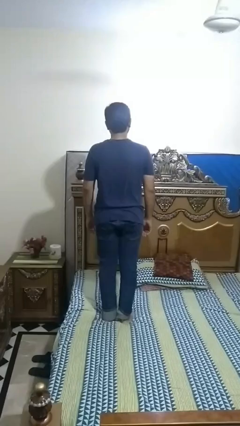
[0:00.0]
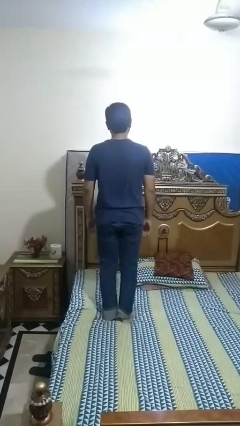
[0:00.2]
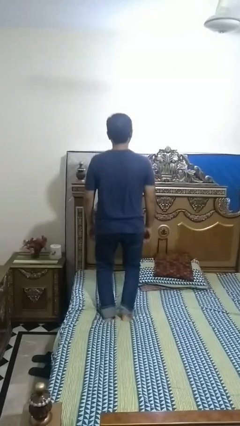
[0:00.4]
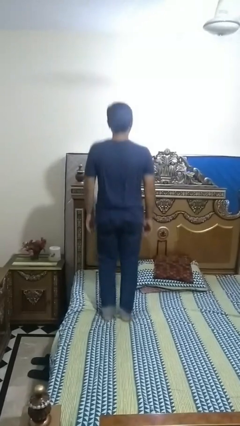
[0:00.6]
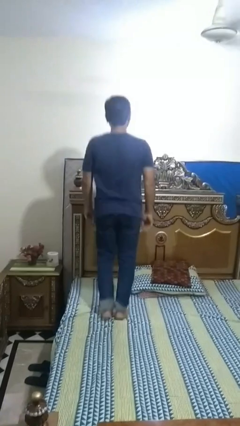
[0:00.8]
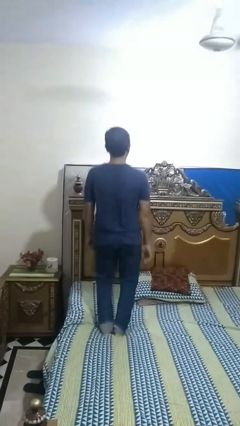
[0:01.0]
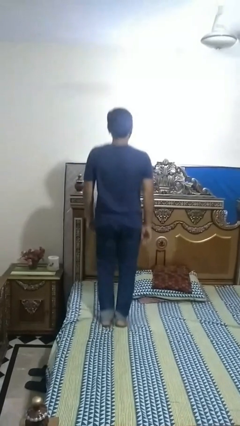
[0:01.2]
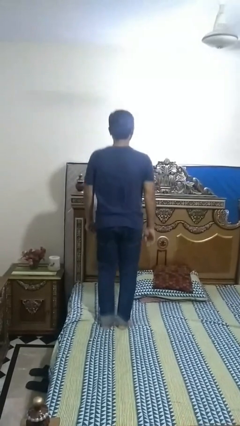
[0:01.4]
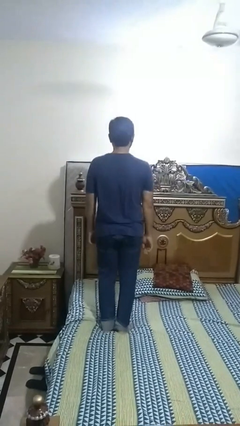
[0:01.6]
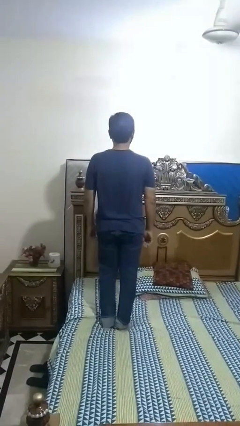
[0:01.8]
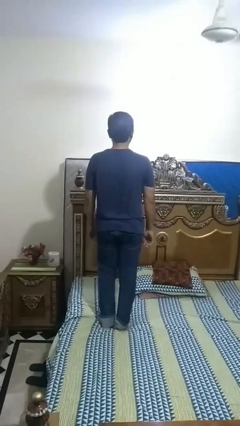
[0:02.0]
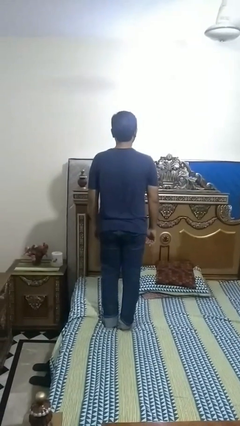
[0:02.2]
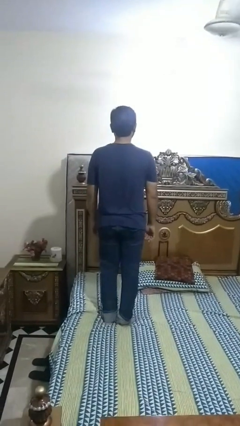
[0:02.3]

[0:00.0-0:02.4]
person jumps on bed

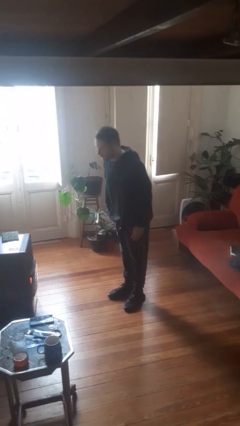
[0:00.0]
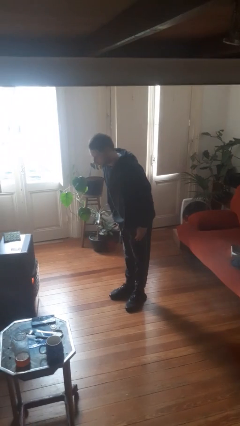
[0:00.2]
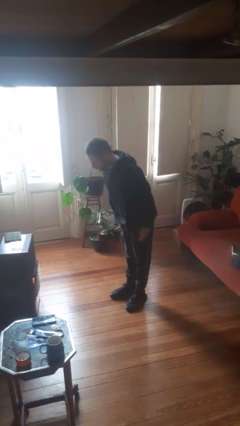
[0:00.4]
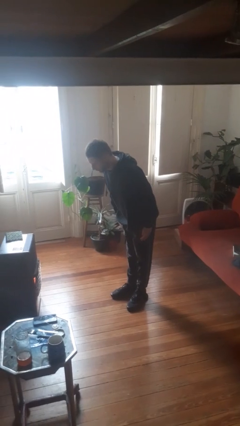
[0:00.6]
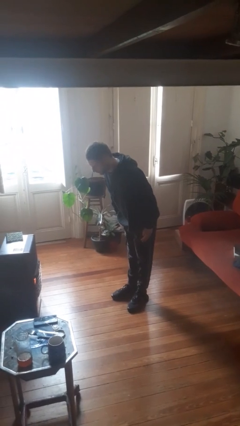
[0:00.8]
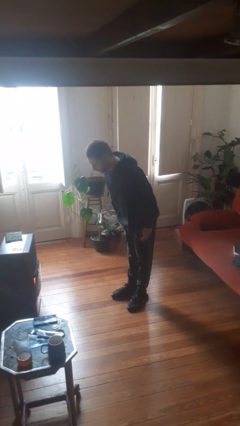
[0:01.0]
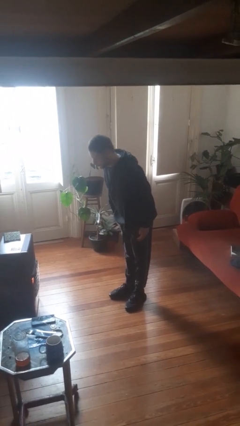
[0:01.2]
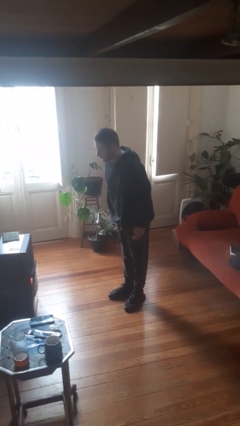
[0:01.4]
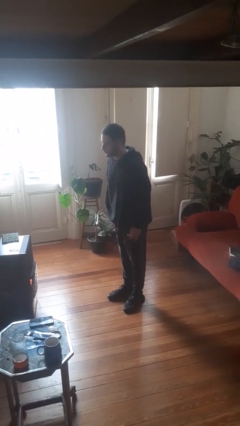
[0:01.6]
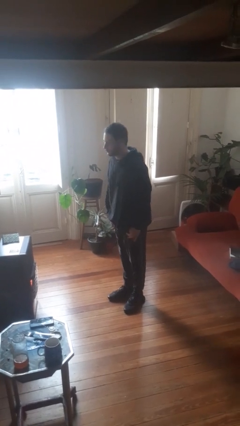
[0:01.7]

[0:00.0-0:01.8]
person bows

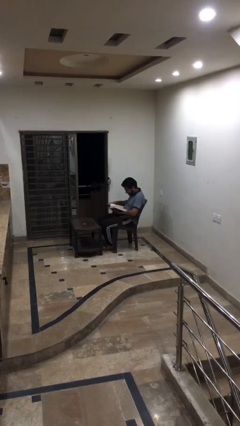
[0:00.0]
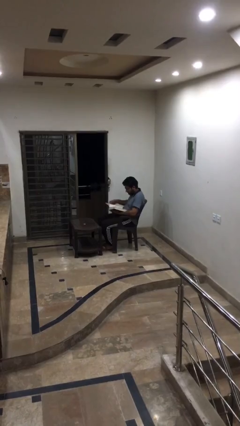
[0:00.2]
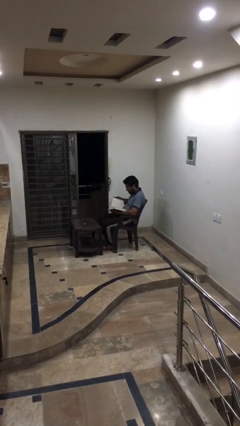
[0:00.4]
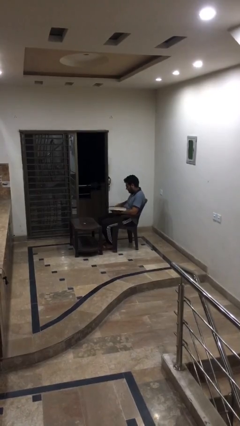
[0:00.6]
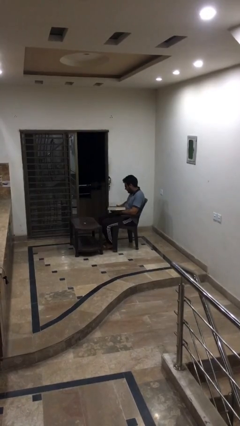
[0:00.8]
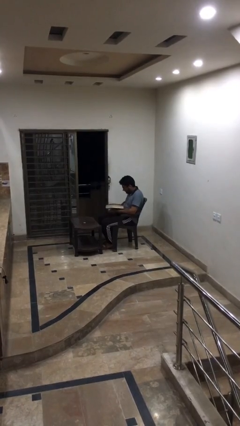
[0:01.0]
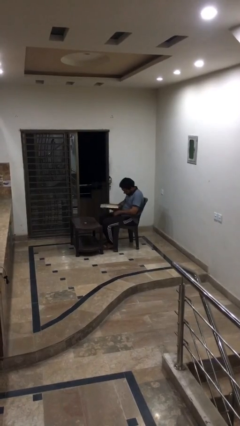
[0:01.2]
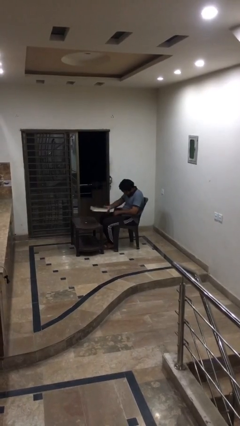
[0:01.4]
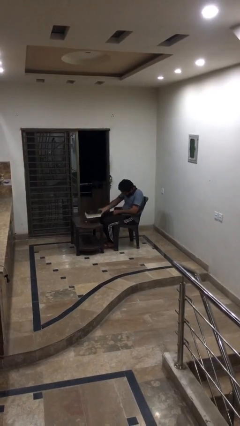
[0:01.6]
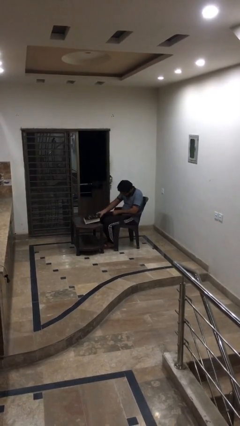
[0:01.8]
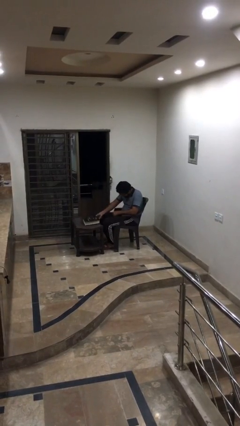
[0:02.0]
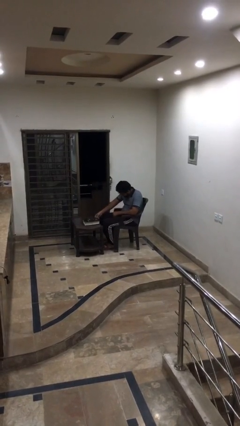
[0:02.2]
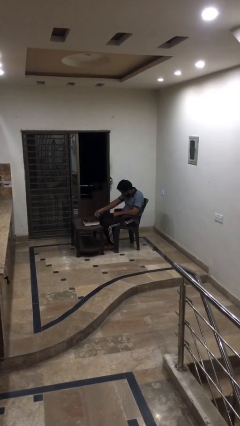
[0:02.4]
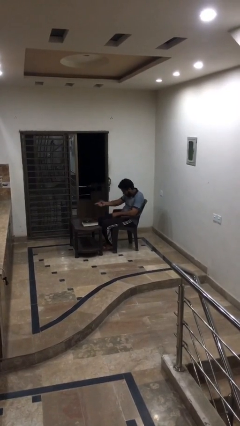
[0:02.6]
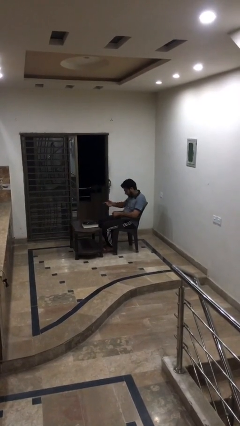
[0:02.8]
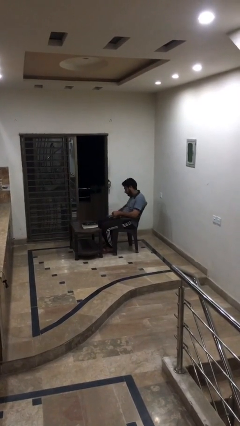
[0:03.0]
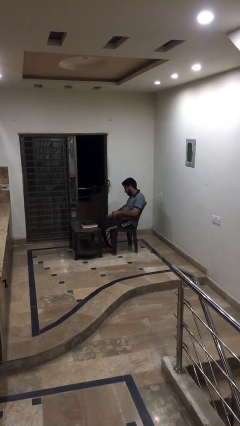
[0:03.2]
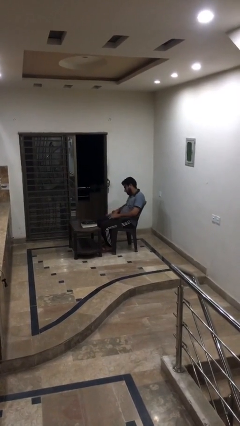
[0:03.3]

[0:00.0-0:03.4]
person puts down object on table

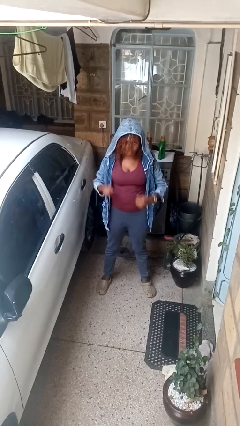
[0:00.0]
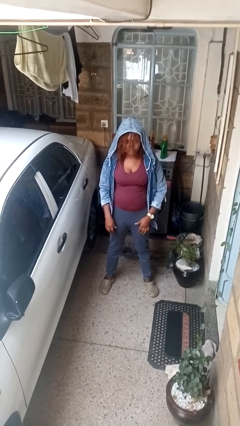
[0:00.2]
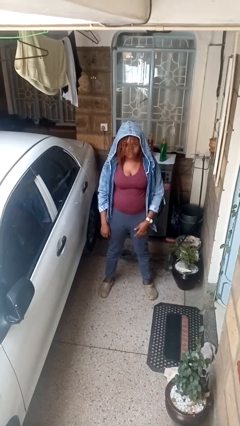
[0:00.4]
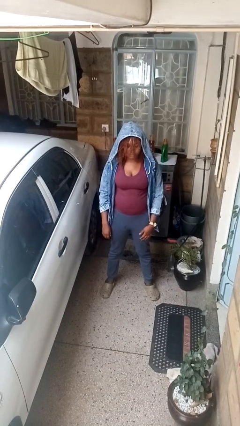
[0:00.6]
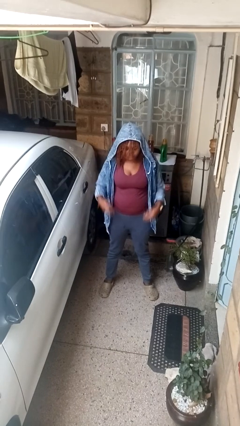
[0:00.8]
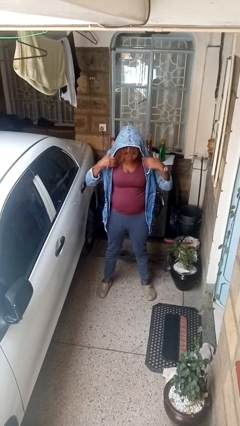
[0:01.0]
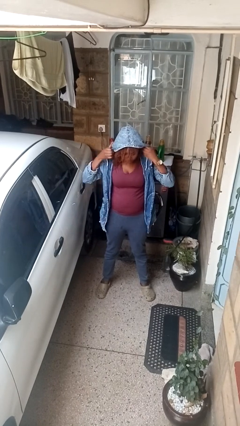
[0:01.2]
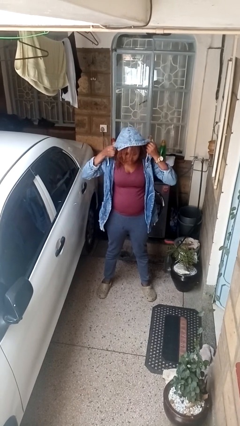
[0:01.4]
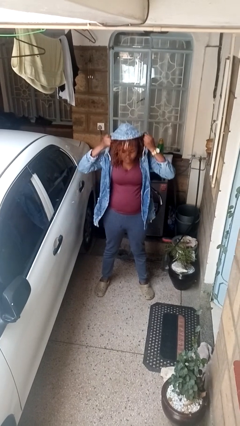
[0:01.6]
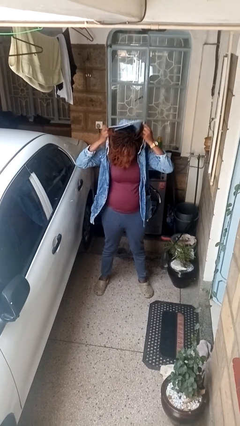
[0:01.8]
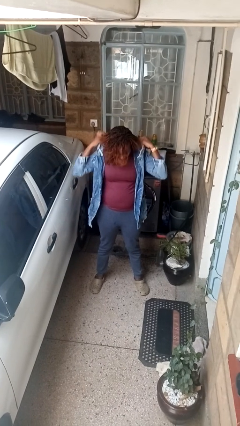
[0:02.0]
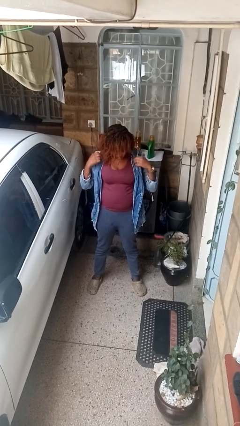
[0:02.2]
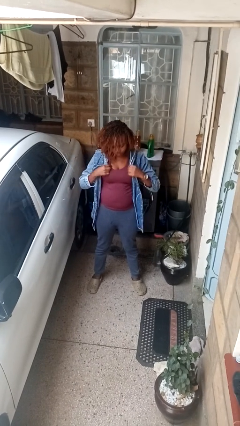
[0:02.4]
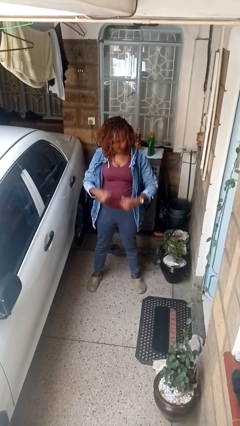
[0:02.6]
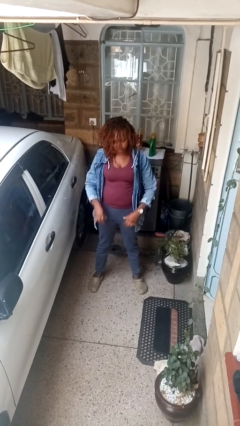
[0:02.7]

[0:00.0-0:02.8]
person takes off hoodie

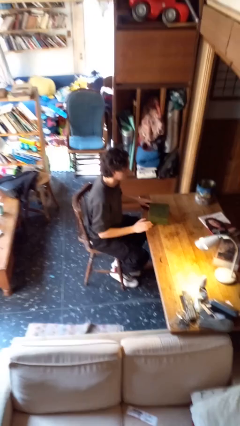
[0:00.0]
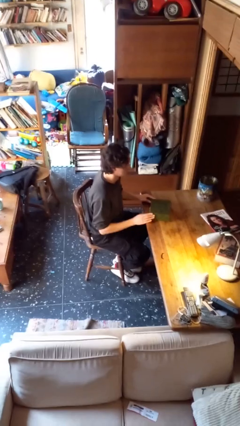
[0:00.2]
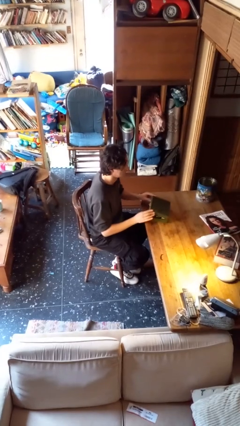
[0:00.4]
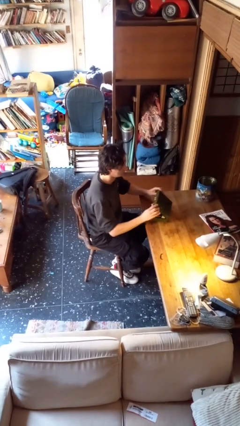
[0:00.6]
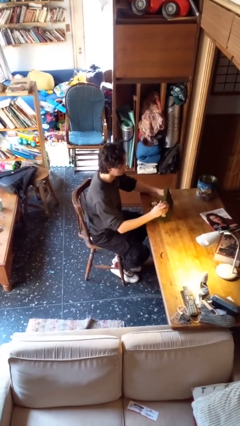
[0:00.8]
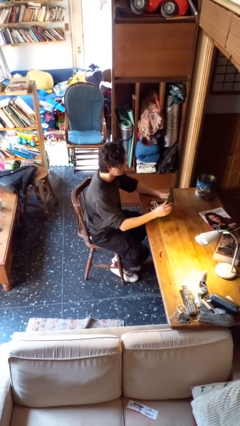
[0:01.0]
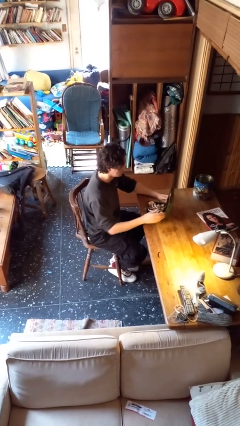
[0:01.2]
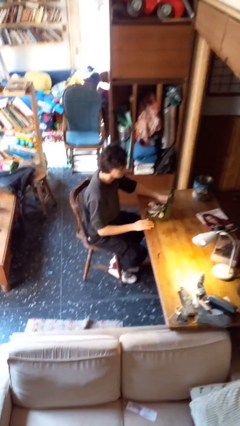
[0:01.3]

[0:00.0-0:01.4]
person opens jewelry box

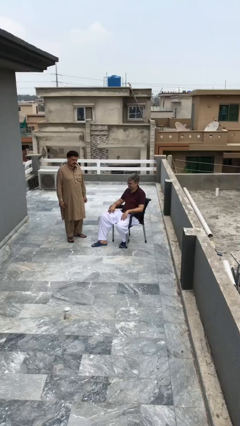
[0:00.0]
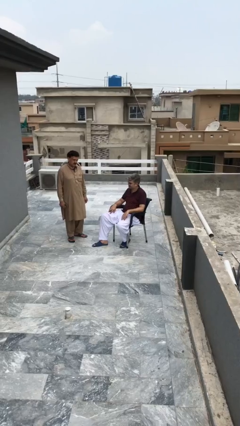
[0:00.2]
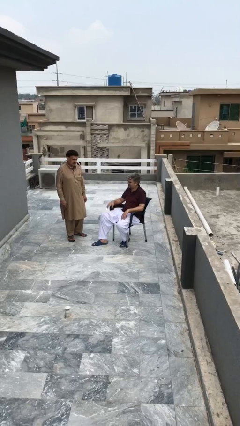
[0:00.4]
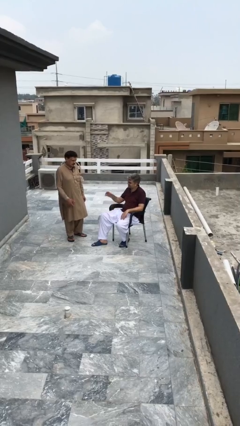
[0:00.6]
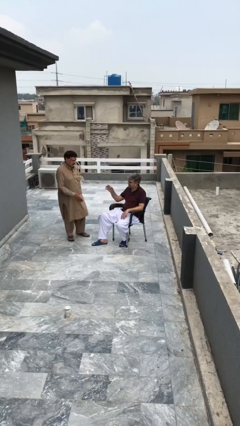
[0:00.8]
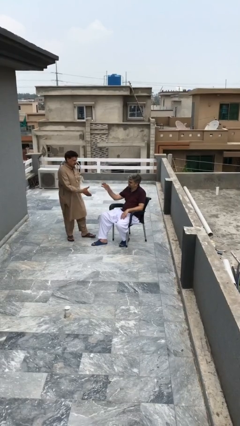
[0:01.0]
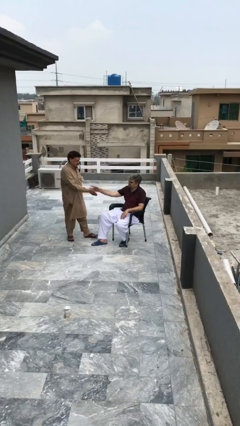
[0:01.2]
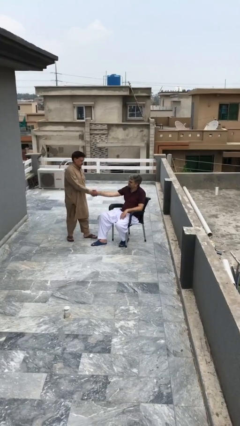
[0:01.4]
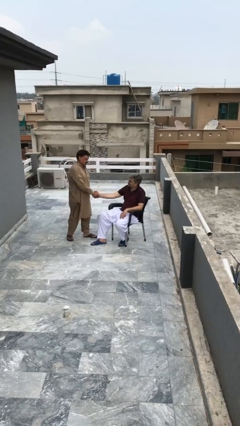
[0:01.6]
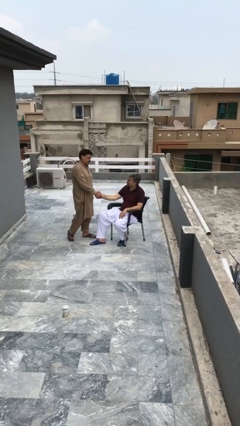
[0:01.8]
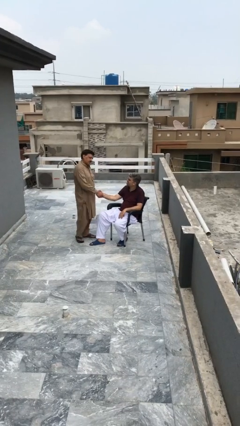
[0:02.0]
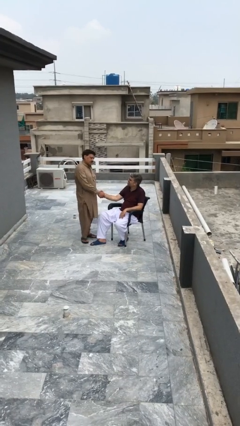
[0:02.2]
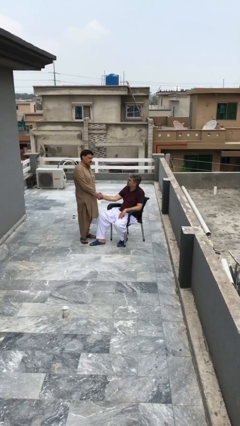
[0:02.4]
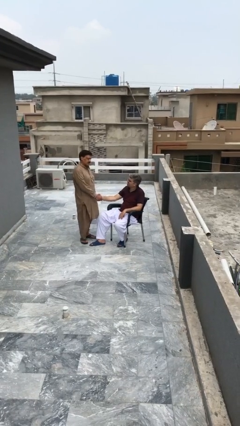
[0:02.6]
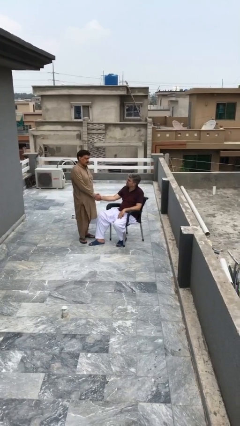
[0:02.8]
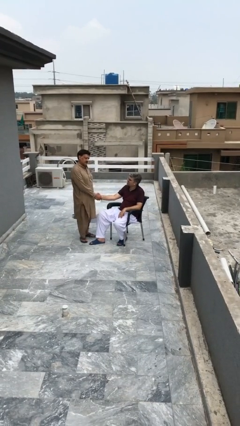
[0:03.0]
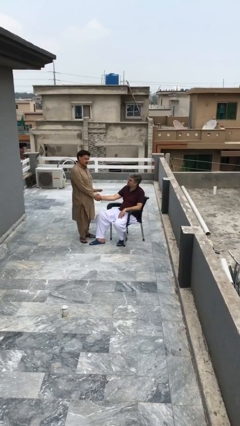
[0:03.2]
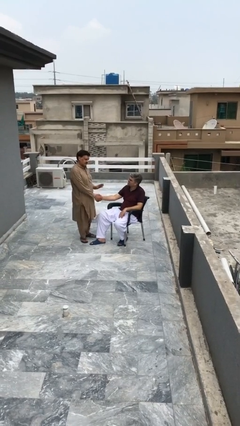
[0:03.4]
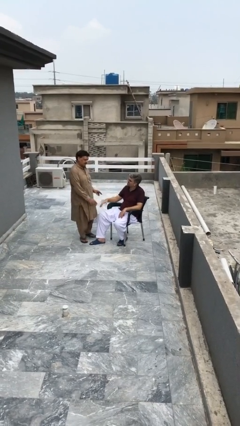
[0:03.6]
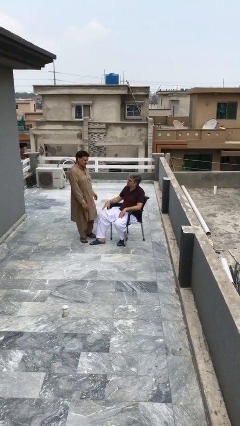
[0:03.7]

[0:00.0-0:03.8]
person shakes hand

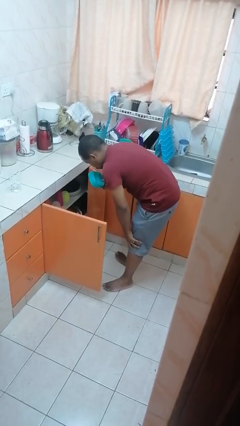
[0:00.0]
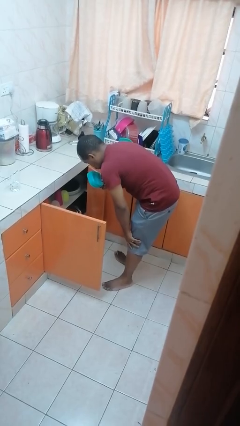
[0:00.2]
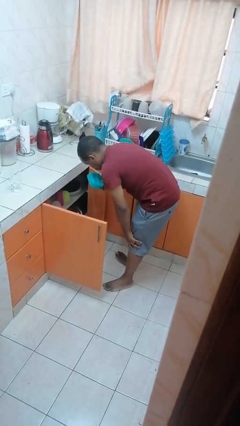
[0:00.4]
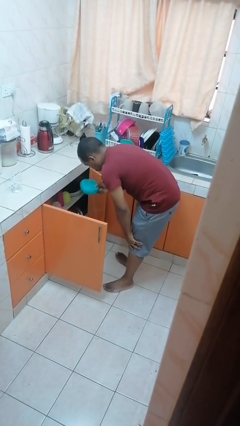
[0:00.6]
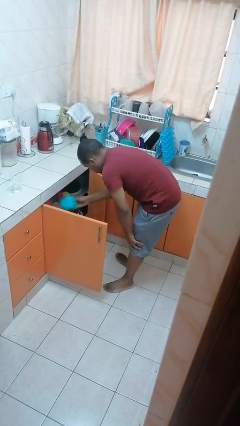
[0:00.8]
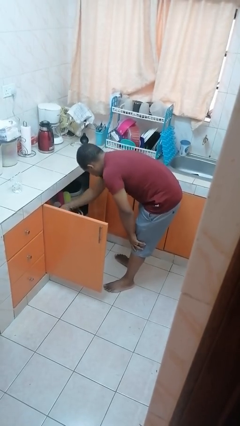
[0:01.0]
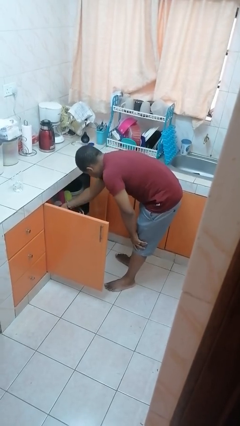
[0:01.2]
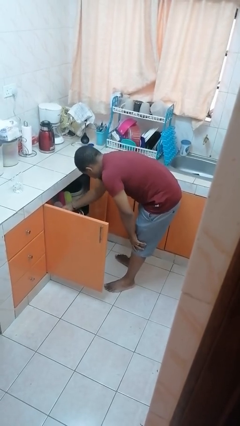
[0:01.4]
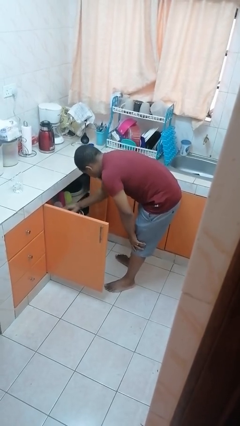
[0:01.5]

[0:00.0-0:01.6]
person puts object in cabinet
